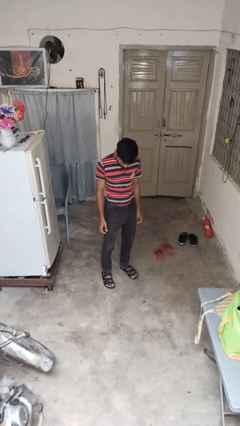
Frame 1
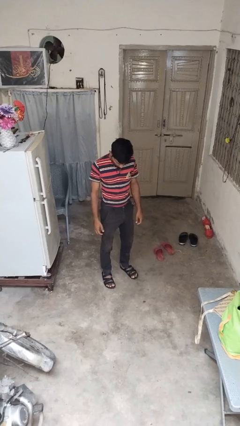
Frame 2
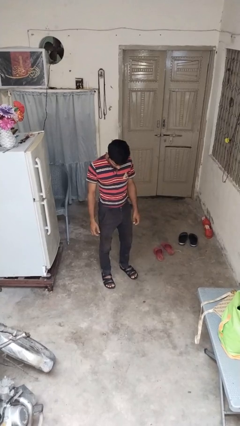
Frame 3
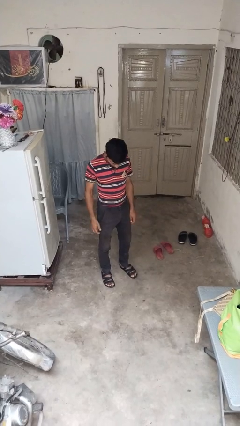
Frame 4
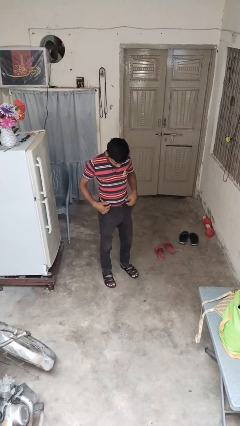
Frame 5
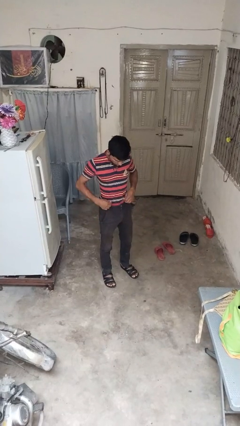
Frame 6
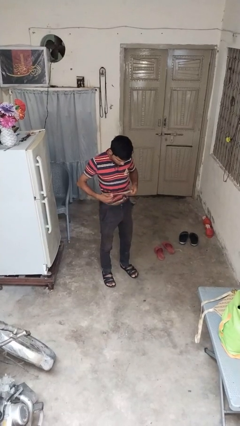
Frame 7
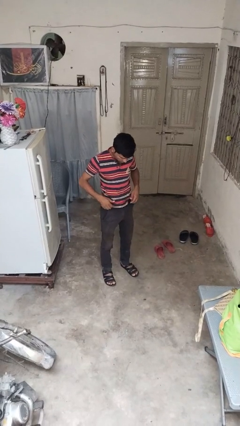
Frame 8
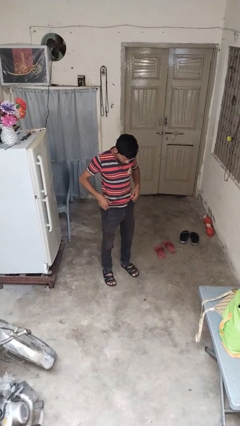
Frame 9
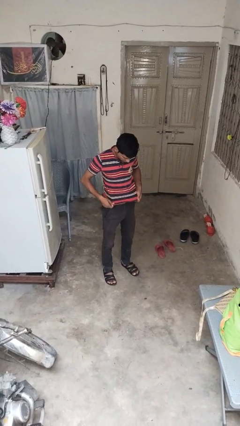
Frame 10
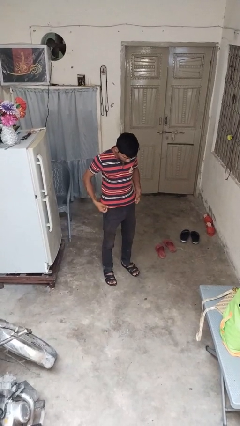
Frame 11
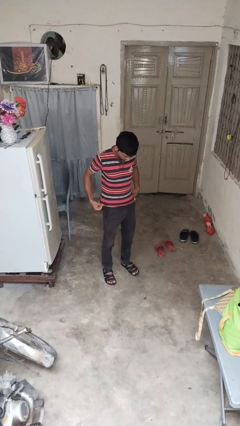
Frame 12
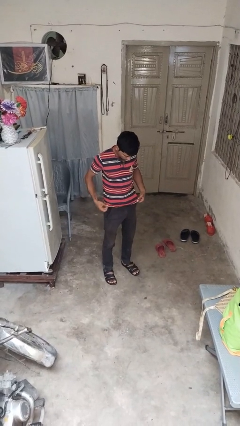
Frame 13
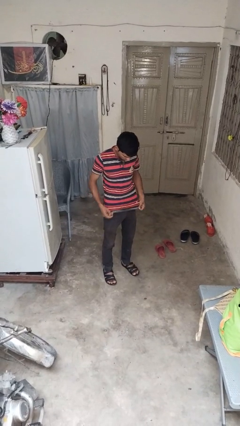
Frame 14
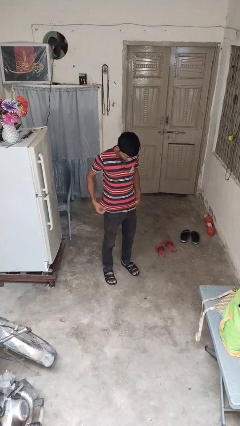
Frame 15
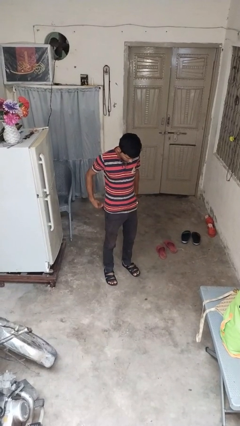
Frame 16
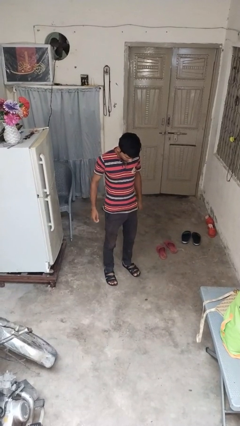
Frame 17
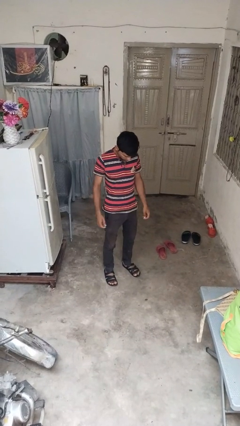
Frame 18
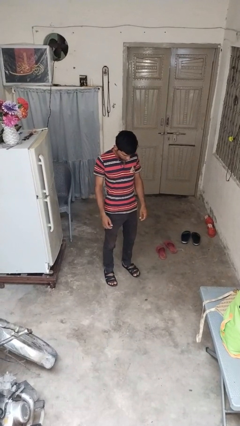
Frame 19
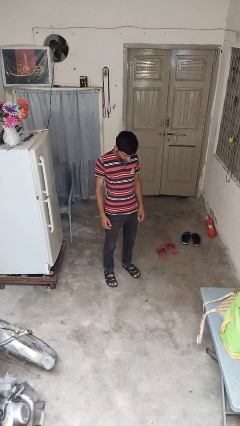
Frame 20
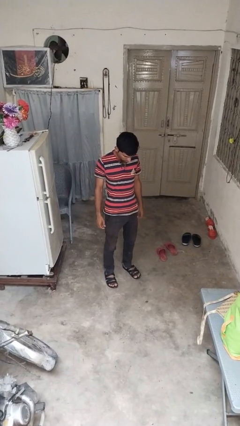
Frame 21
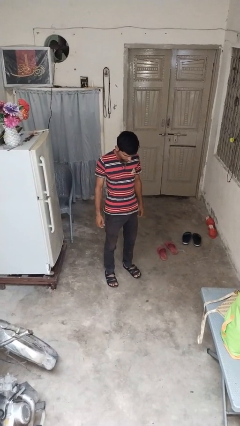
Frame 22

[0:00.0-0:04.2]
person untucks shirt

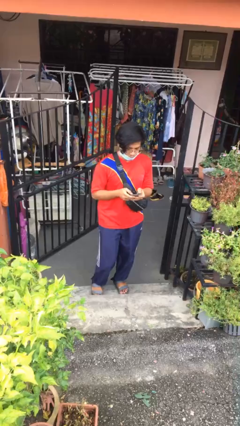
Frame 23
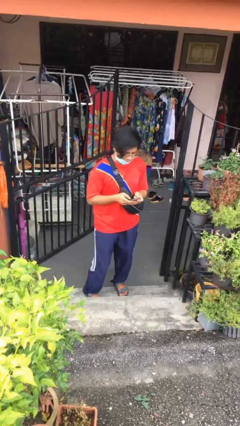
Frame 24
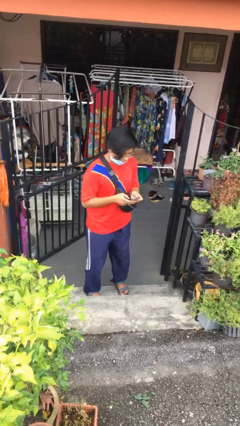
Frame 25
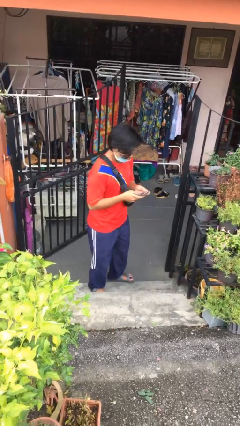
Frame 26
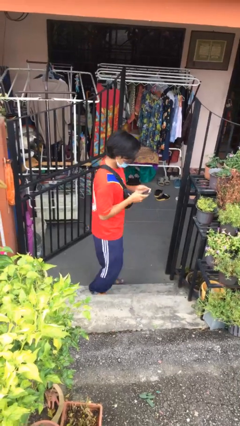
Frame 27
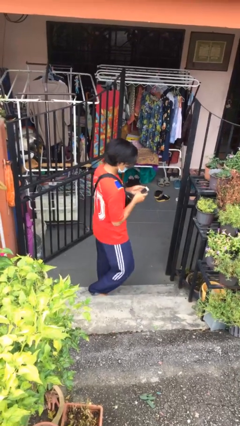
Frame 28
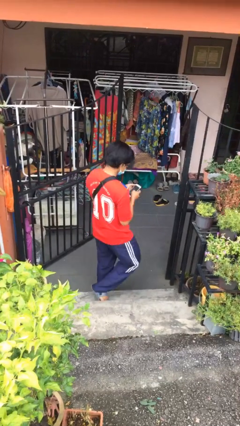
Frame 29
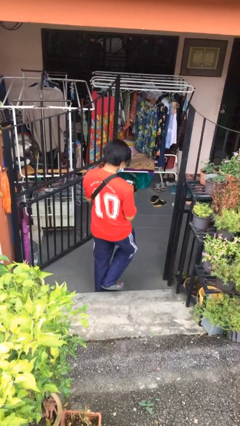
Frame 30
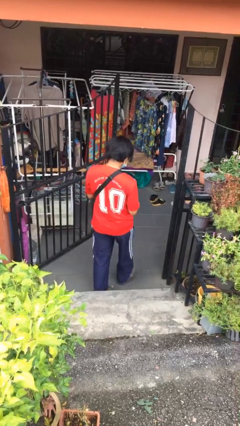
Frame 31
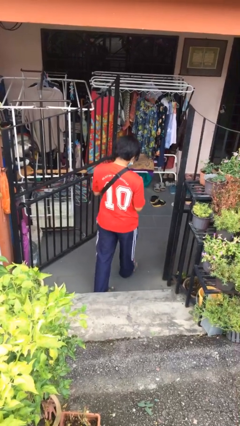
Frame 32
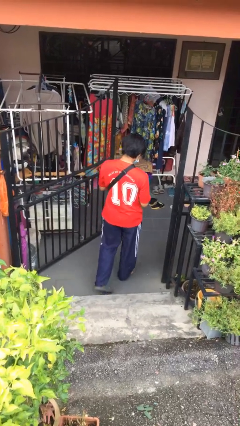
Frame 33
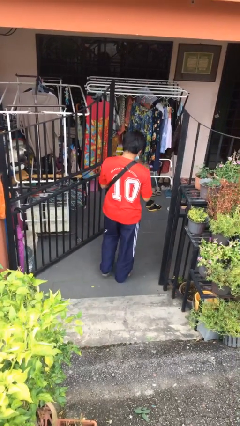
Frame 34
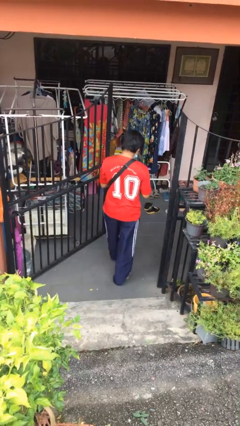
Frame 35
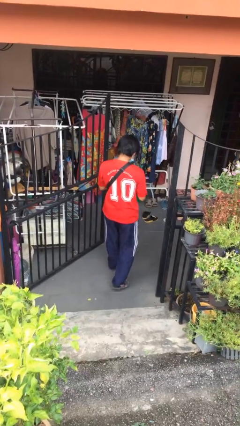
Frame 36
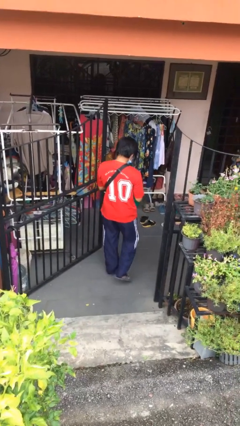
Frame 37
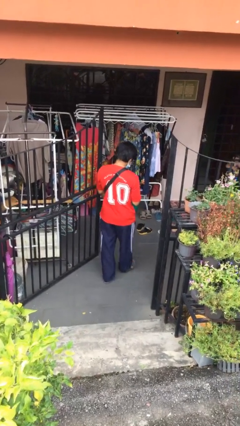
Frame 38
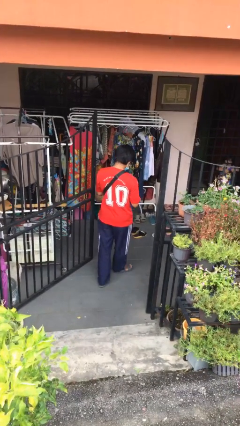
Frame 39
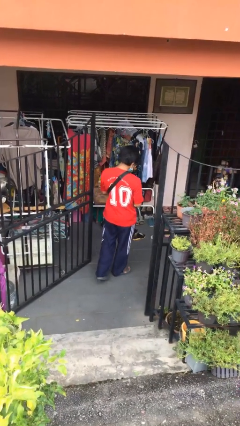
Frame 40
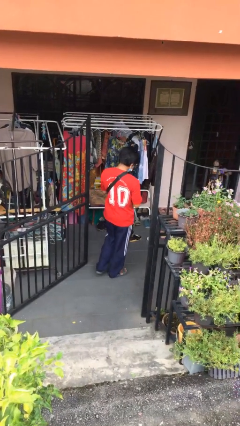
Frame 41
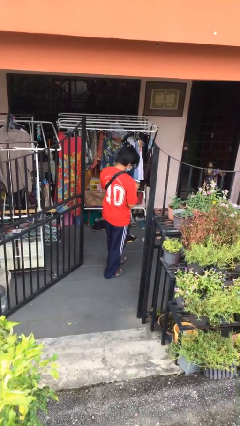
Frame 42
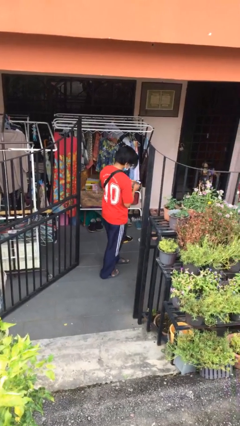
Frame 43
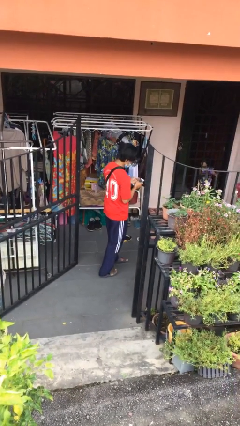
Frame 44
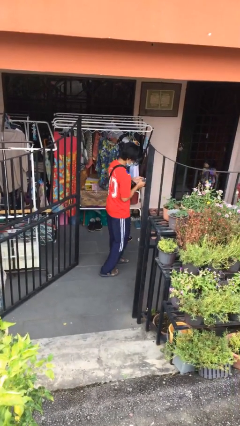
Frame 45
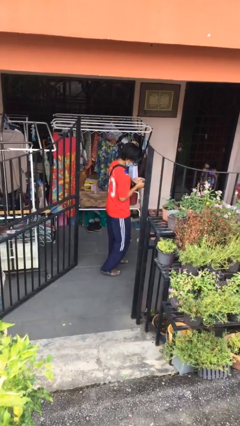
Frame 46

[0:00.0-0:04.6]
person exits scene through structure

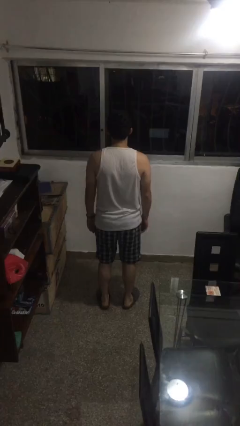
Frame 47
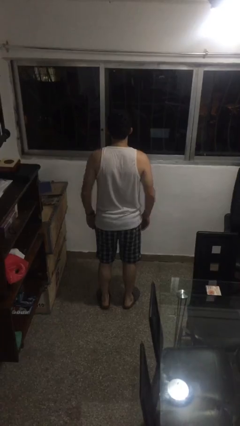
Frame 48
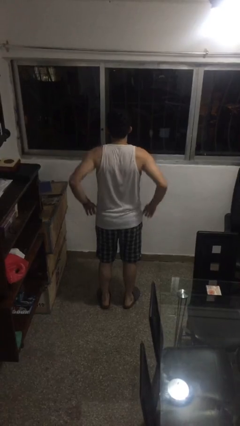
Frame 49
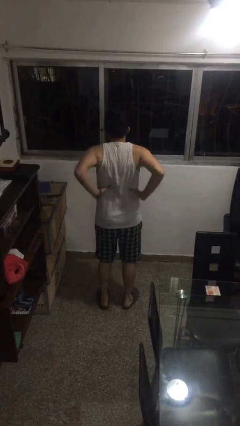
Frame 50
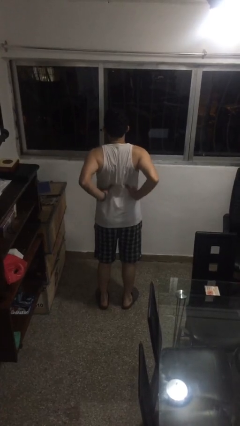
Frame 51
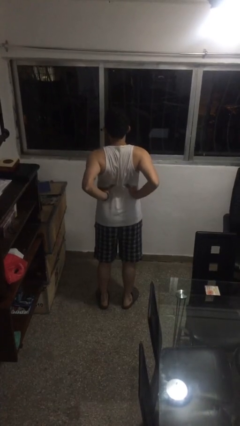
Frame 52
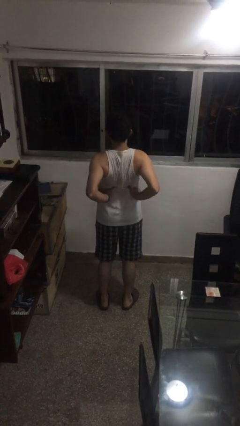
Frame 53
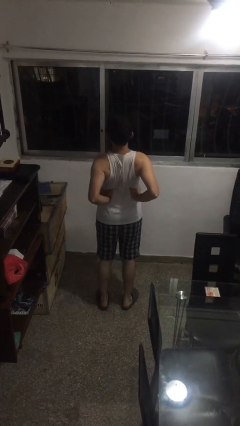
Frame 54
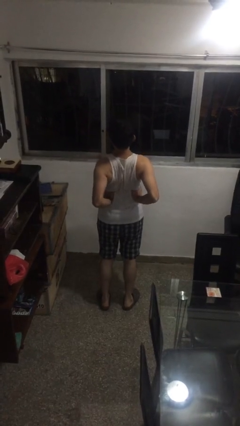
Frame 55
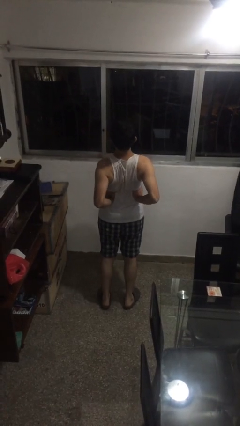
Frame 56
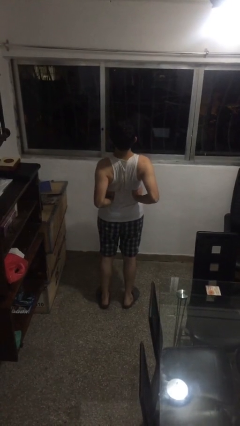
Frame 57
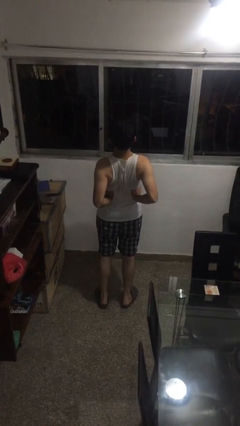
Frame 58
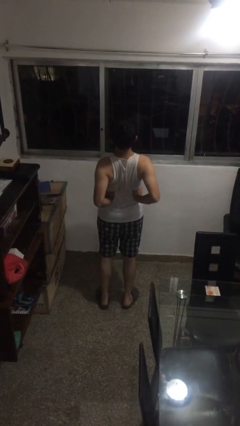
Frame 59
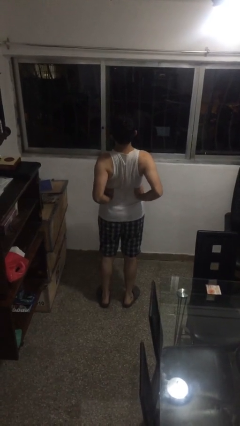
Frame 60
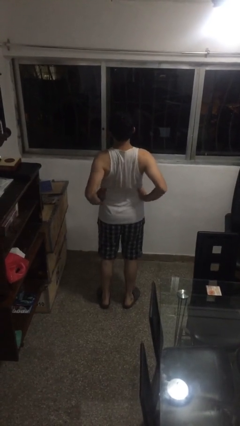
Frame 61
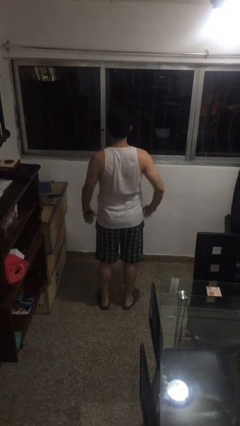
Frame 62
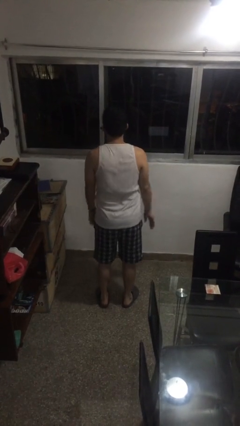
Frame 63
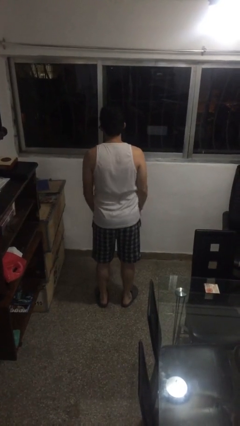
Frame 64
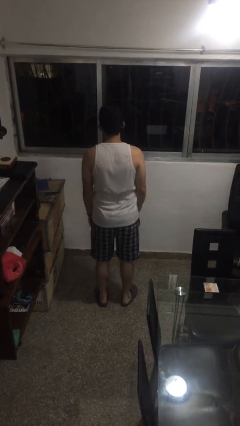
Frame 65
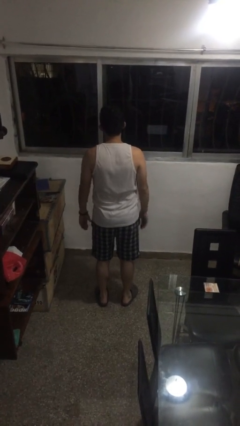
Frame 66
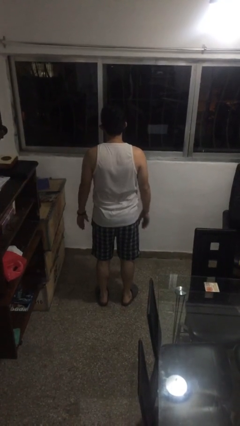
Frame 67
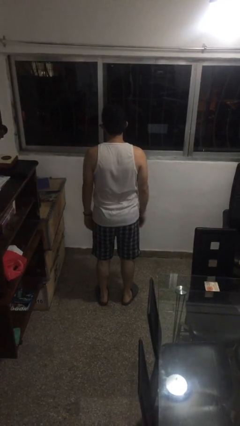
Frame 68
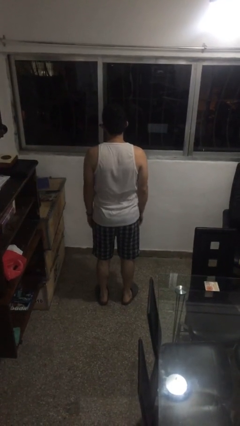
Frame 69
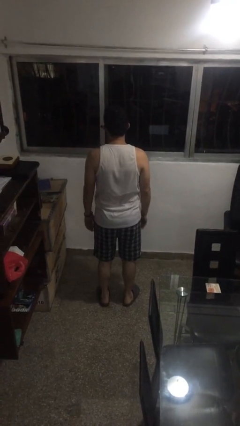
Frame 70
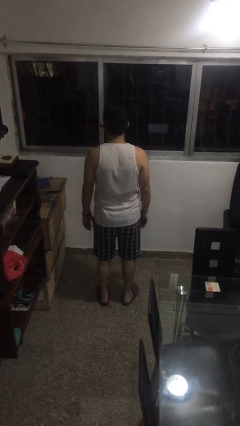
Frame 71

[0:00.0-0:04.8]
person stretches back

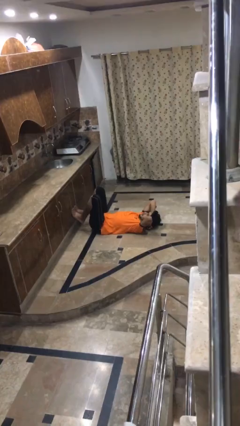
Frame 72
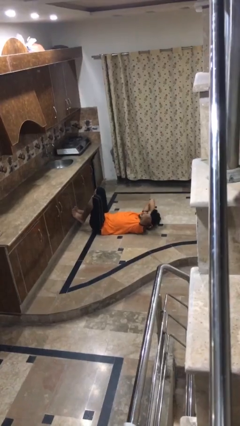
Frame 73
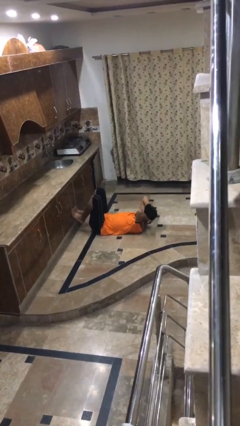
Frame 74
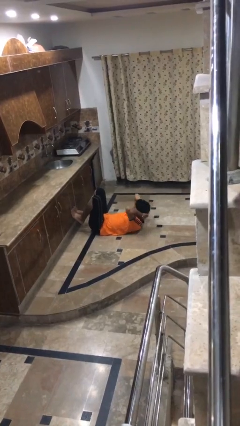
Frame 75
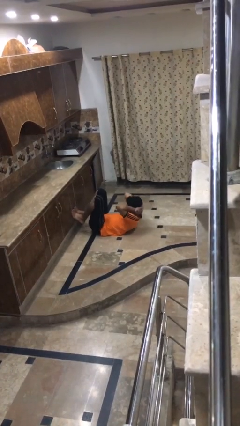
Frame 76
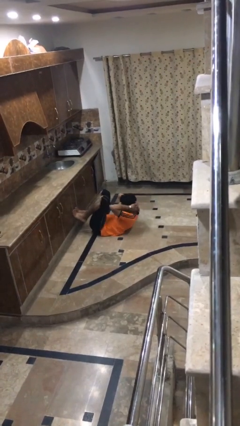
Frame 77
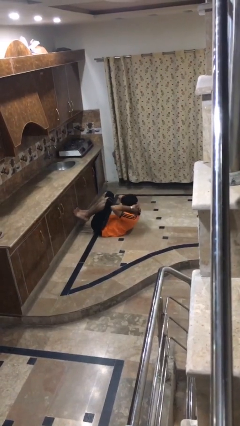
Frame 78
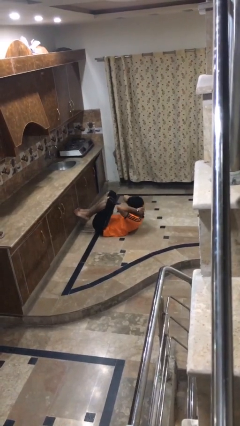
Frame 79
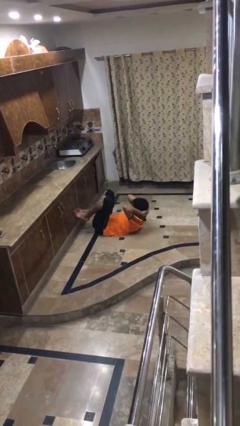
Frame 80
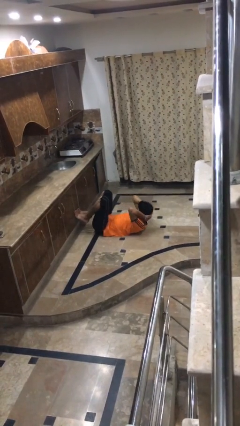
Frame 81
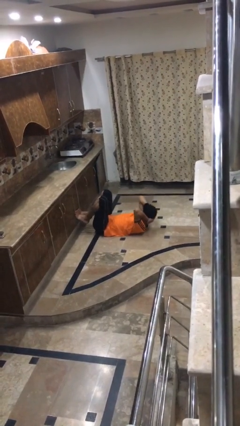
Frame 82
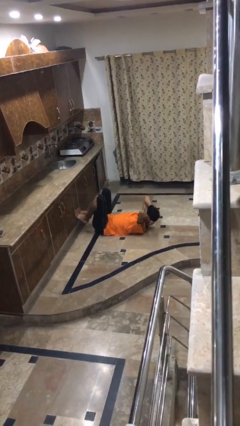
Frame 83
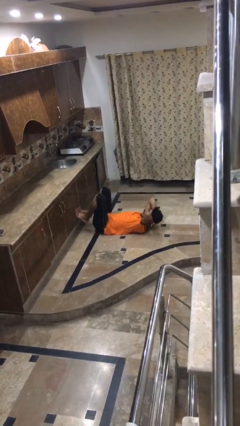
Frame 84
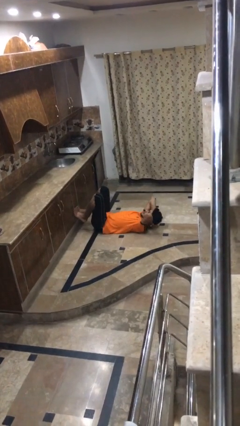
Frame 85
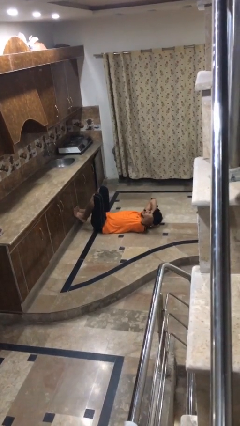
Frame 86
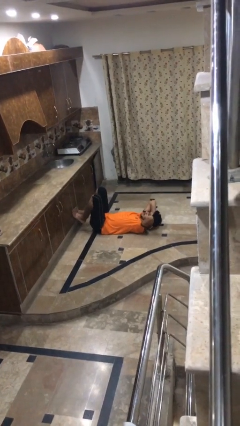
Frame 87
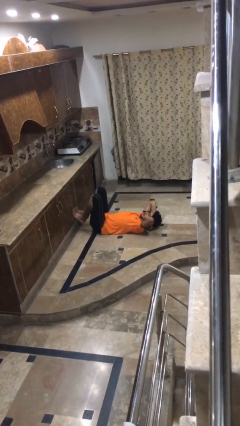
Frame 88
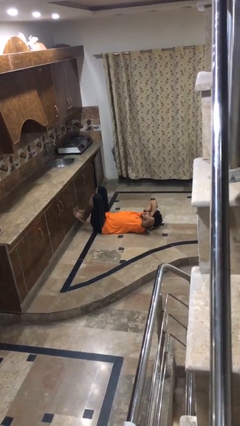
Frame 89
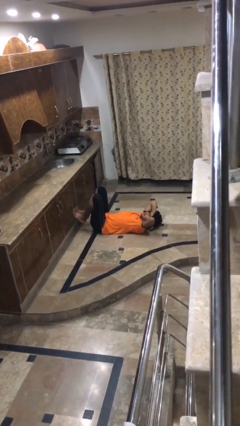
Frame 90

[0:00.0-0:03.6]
person exercises with situp

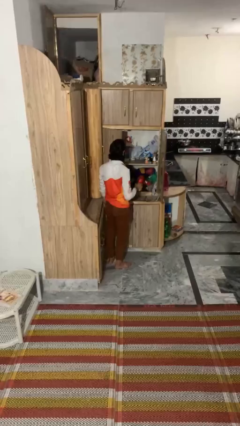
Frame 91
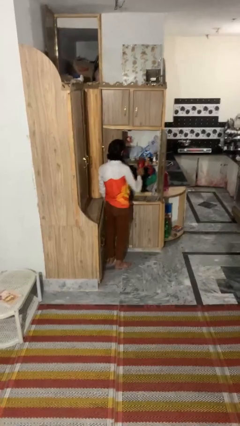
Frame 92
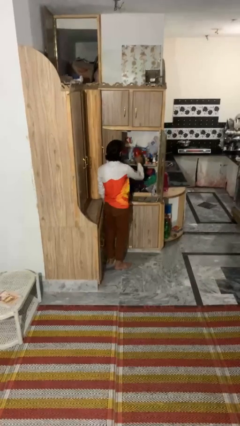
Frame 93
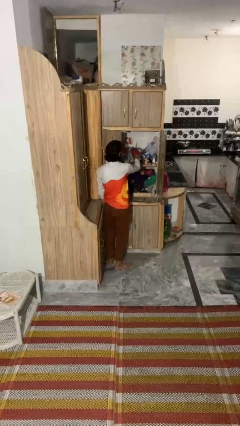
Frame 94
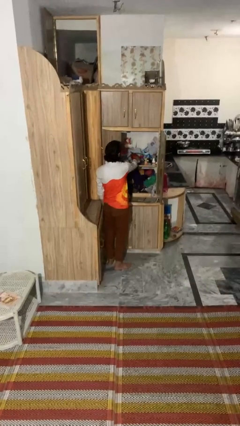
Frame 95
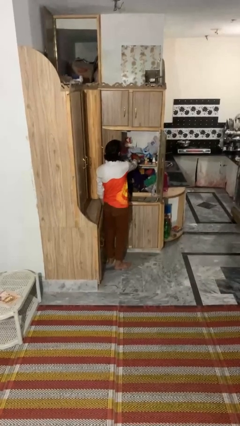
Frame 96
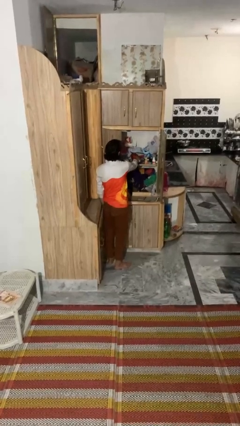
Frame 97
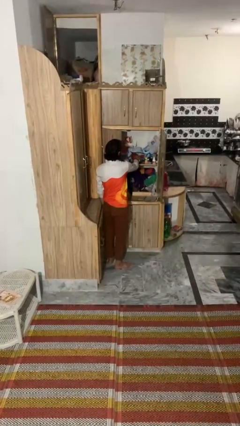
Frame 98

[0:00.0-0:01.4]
person puts down object into cabinet
